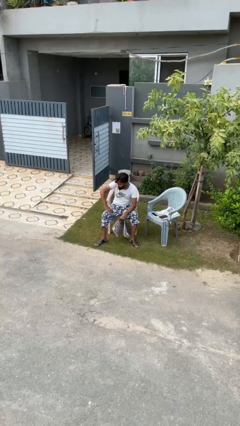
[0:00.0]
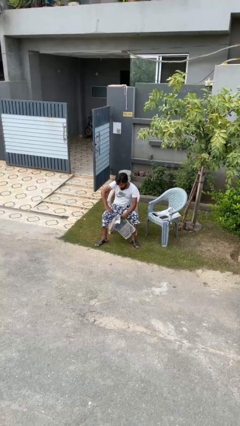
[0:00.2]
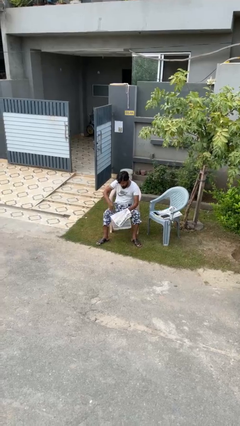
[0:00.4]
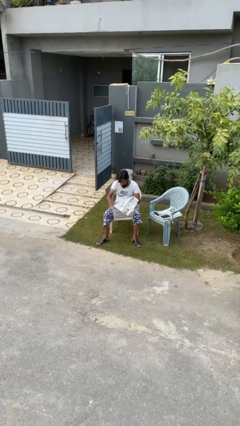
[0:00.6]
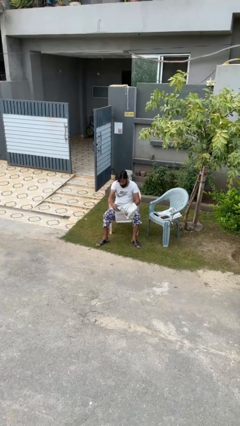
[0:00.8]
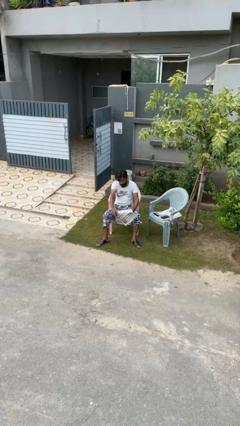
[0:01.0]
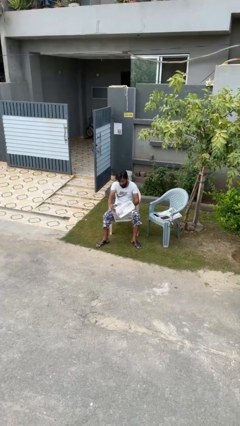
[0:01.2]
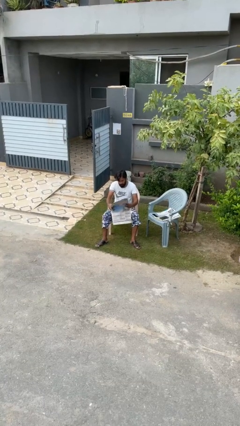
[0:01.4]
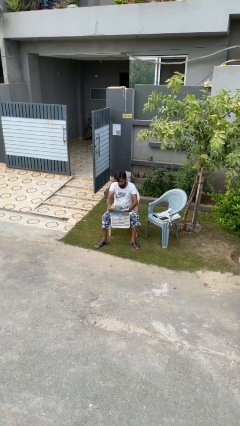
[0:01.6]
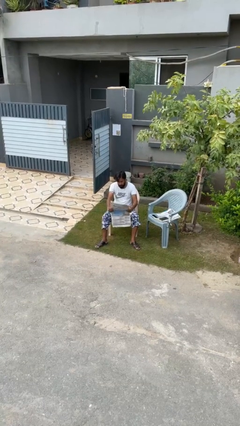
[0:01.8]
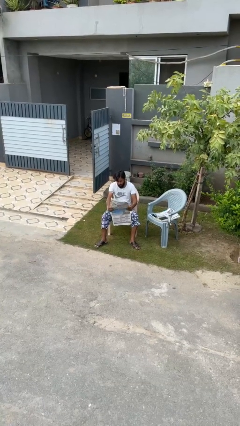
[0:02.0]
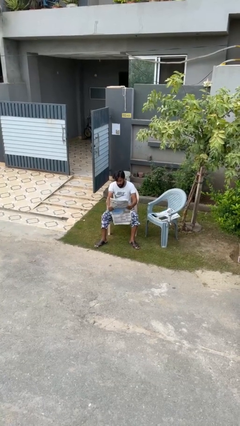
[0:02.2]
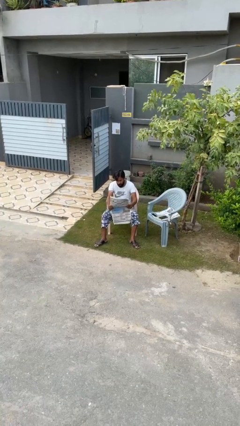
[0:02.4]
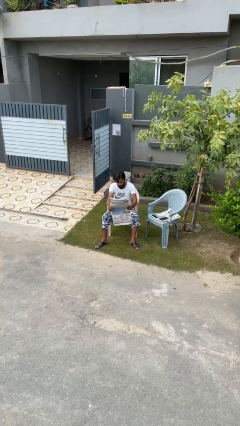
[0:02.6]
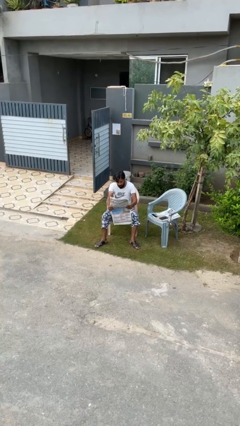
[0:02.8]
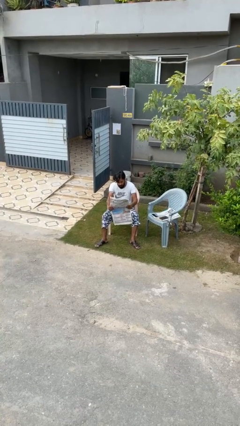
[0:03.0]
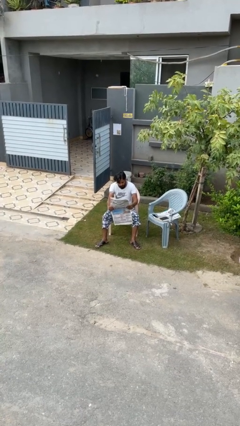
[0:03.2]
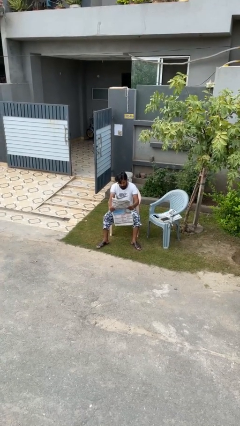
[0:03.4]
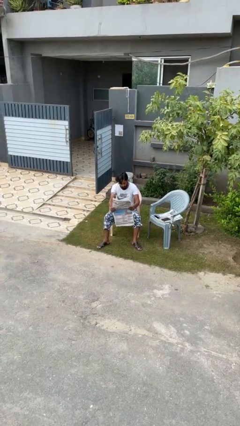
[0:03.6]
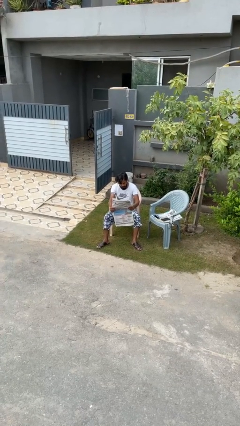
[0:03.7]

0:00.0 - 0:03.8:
person reads newspaper

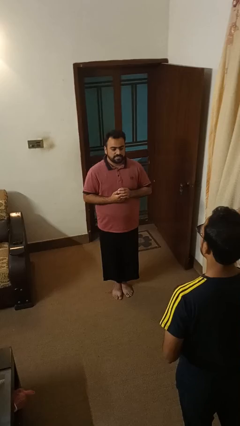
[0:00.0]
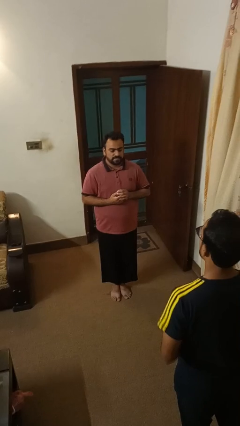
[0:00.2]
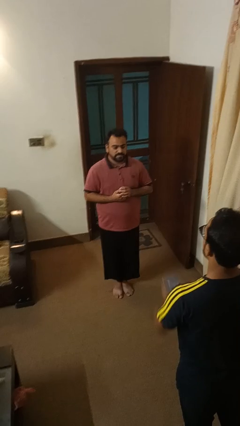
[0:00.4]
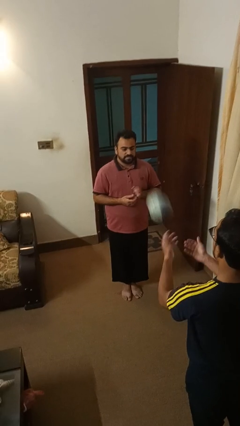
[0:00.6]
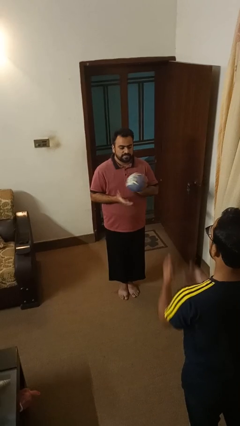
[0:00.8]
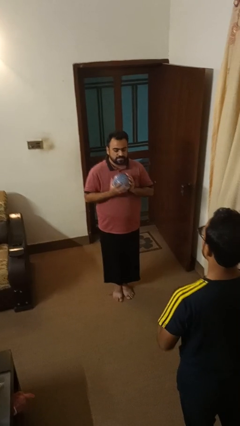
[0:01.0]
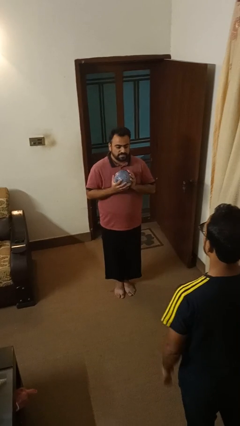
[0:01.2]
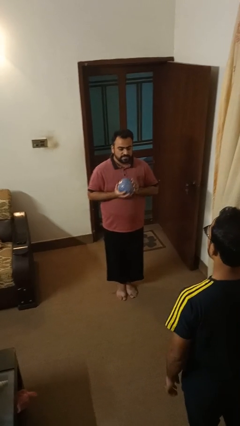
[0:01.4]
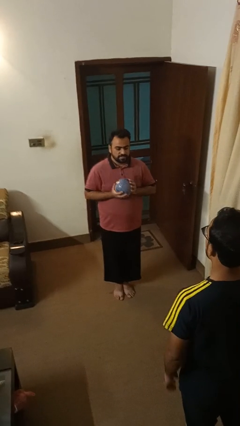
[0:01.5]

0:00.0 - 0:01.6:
person catches object from person

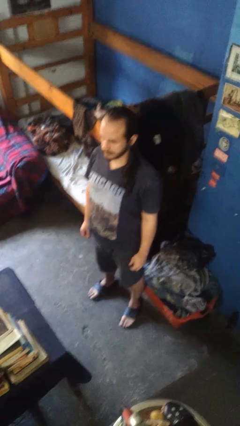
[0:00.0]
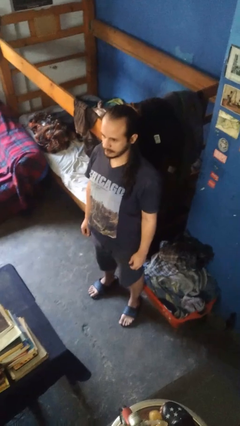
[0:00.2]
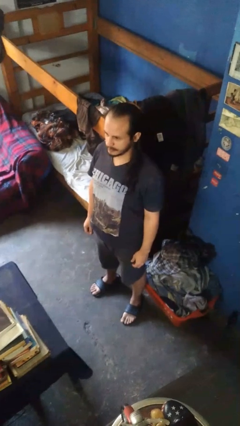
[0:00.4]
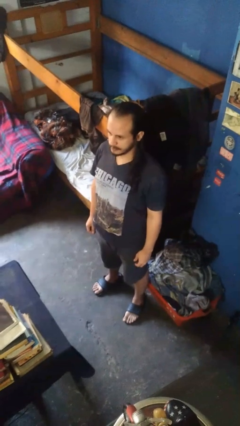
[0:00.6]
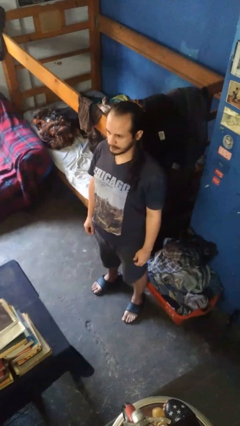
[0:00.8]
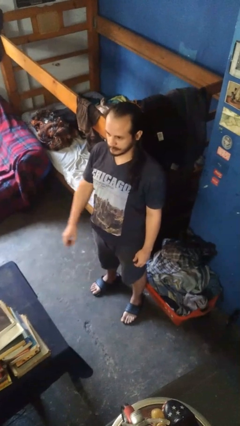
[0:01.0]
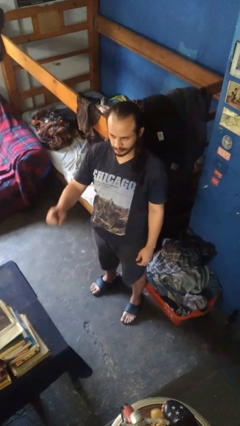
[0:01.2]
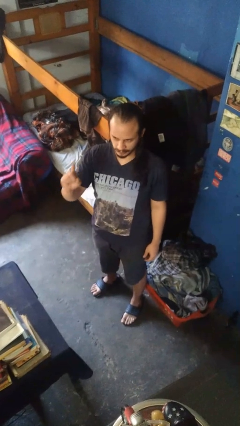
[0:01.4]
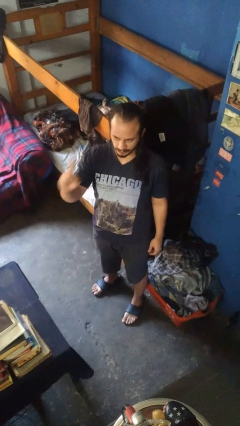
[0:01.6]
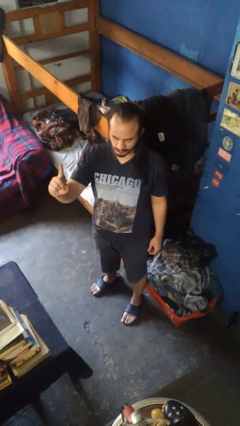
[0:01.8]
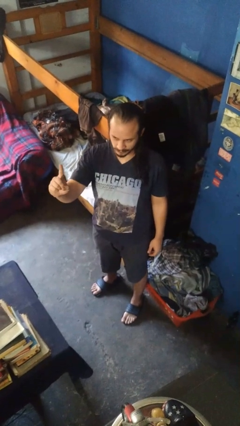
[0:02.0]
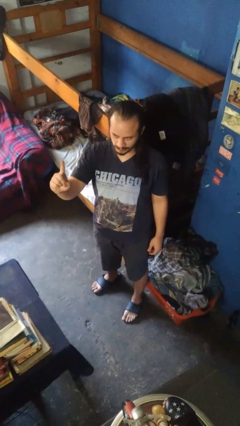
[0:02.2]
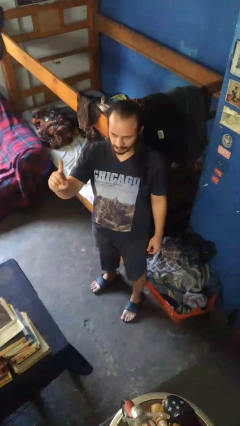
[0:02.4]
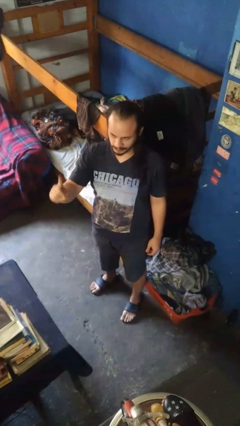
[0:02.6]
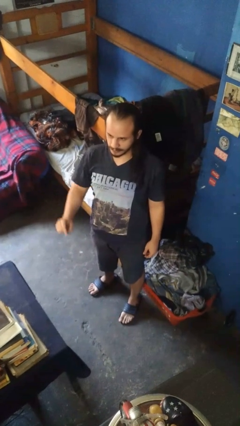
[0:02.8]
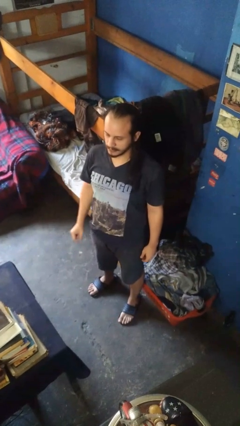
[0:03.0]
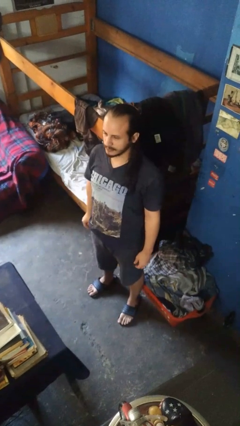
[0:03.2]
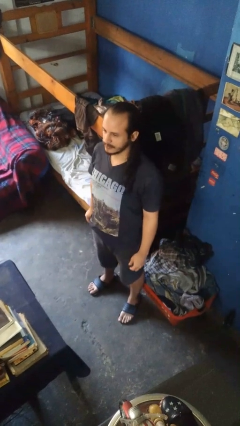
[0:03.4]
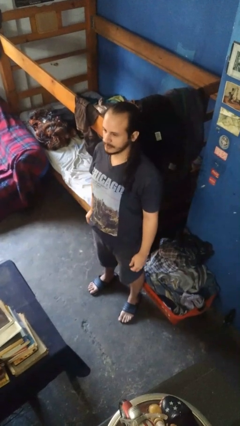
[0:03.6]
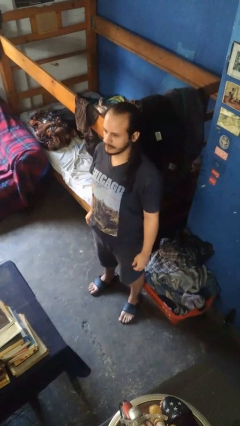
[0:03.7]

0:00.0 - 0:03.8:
person gestures number one

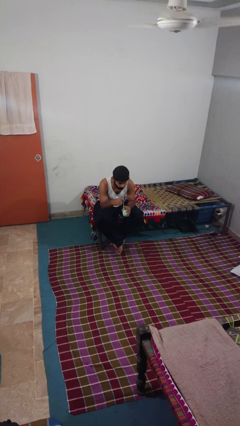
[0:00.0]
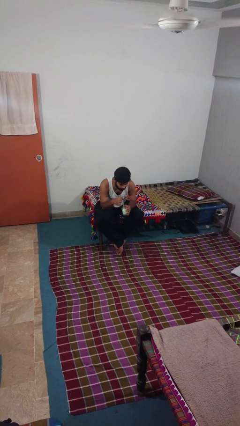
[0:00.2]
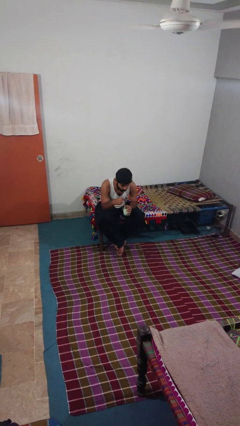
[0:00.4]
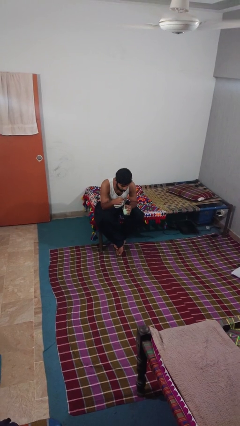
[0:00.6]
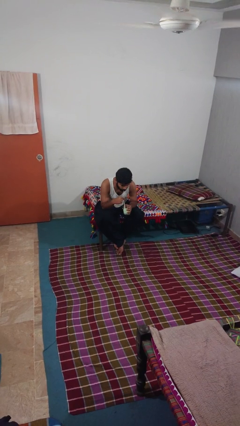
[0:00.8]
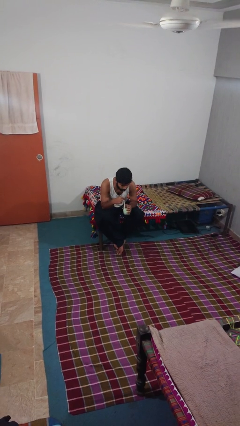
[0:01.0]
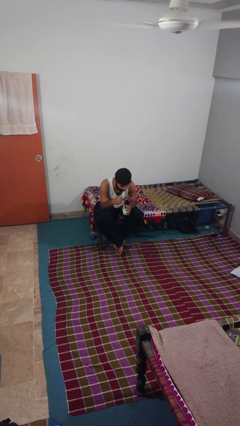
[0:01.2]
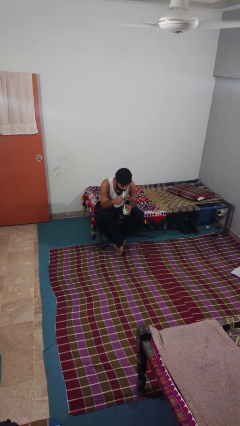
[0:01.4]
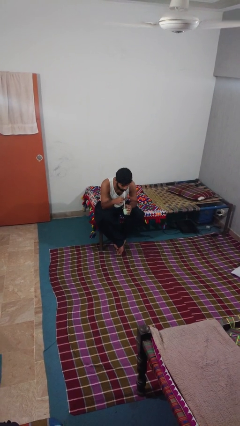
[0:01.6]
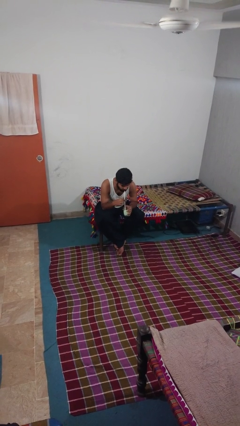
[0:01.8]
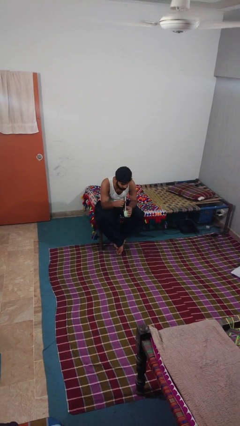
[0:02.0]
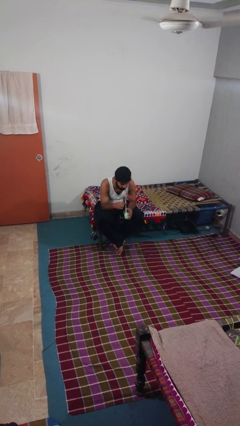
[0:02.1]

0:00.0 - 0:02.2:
person drinks from straw

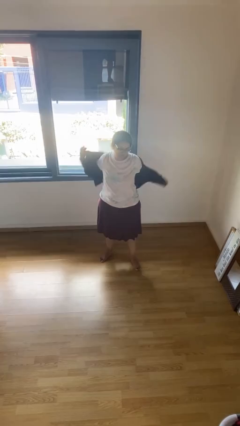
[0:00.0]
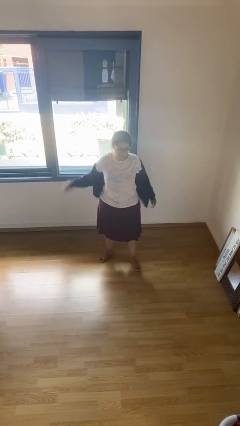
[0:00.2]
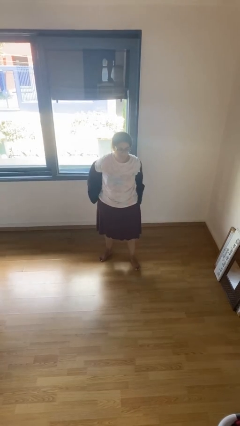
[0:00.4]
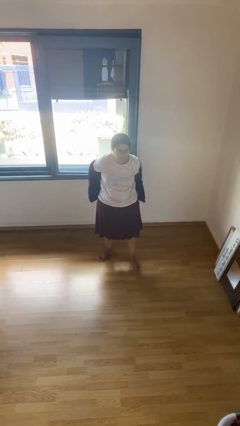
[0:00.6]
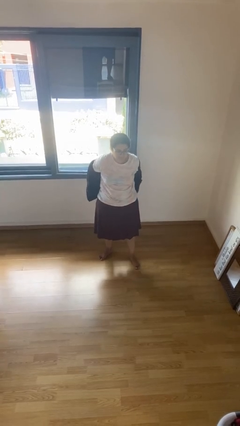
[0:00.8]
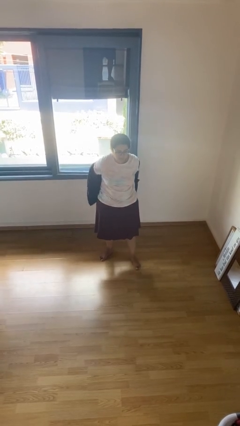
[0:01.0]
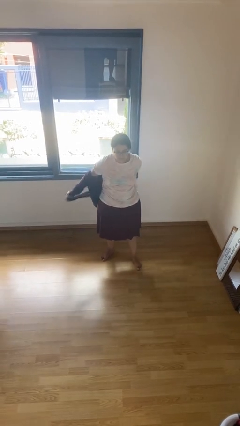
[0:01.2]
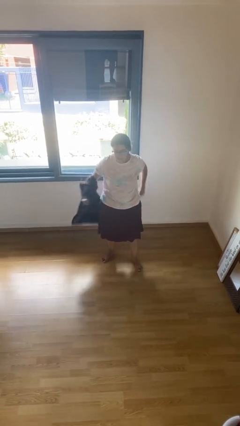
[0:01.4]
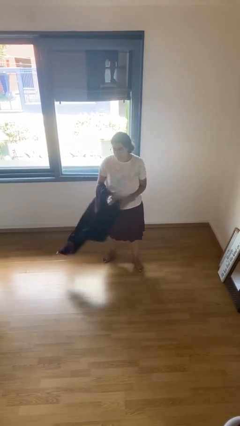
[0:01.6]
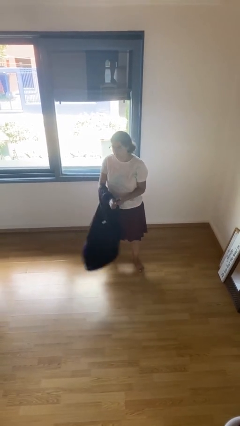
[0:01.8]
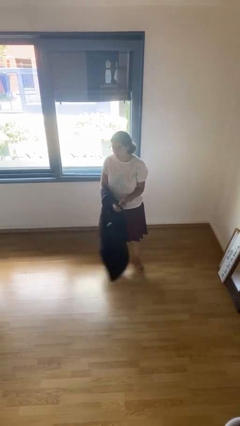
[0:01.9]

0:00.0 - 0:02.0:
person takes off jacket

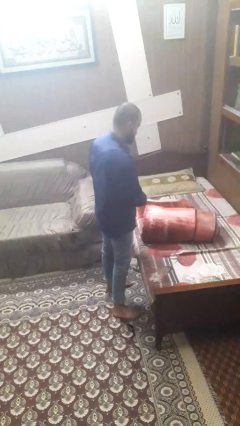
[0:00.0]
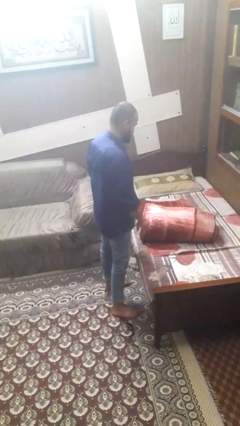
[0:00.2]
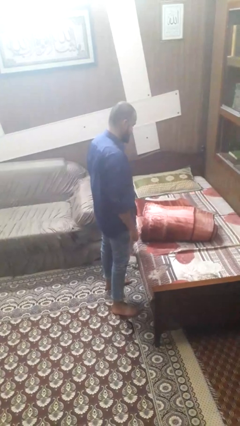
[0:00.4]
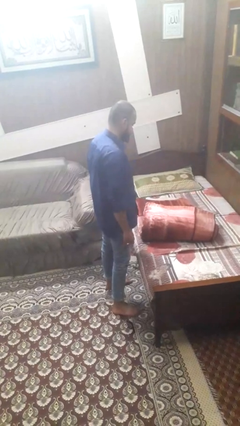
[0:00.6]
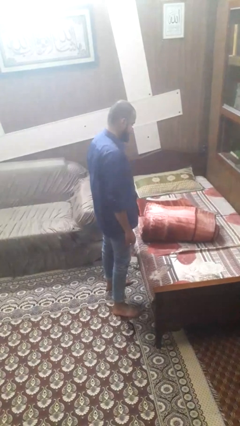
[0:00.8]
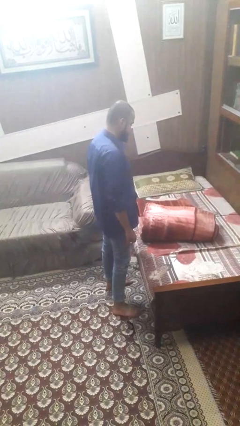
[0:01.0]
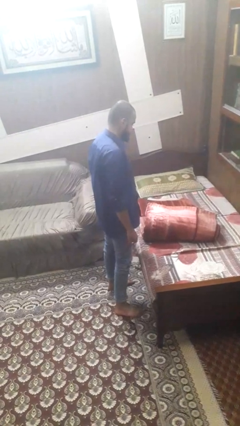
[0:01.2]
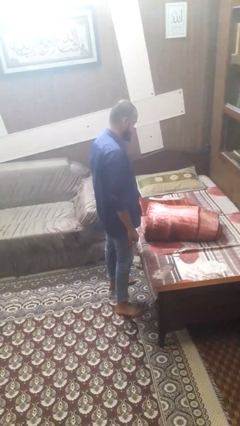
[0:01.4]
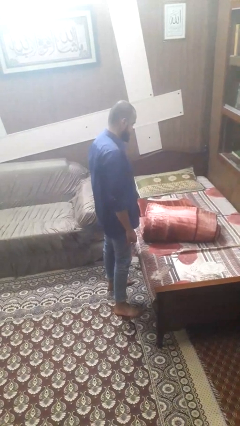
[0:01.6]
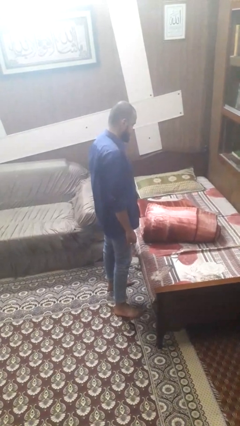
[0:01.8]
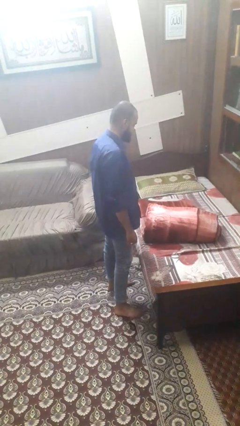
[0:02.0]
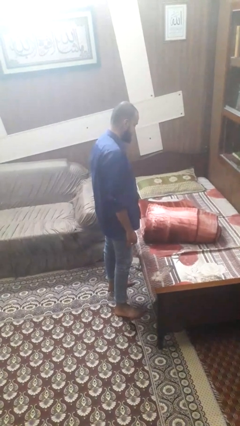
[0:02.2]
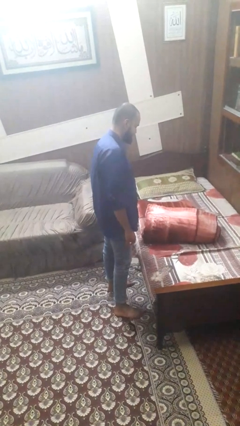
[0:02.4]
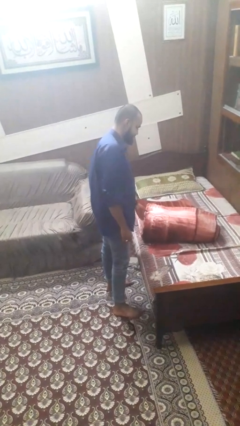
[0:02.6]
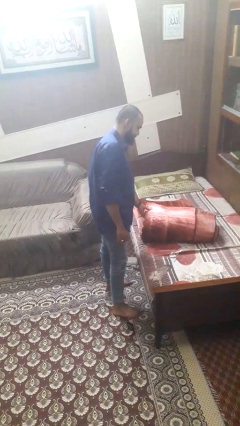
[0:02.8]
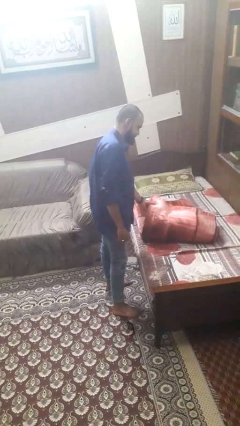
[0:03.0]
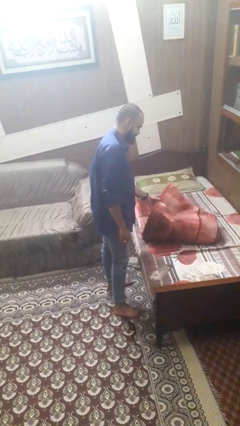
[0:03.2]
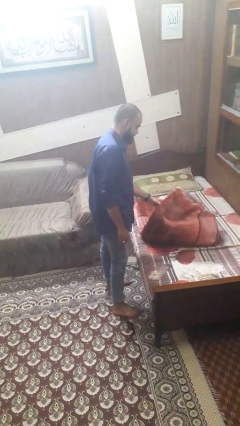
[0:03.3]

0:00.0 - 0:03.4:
person folds blanket

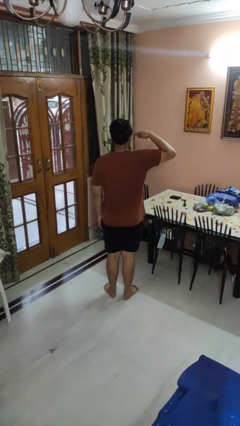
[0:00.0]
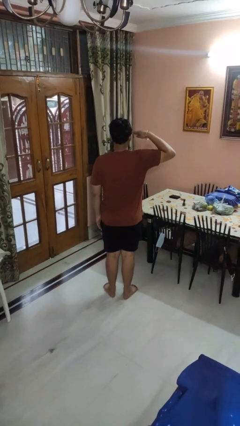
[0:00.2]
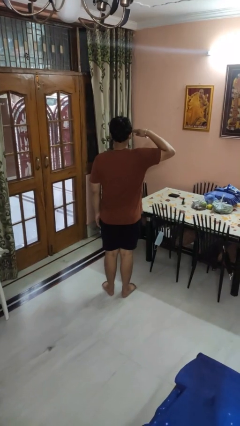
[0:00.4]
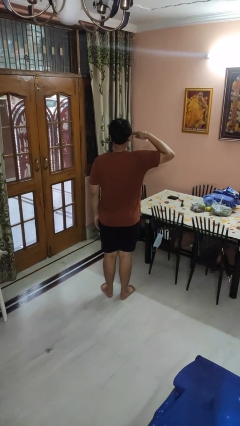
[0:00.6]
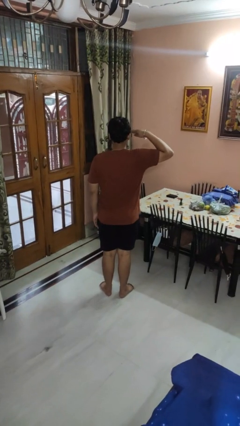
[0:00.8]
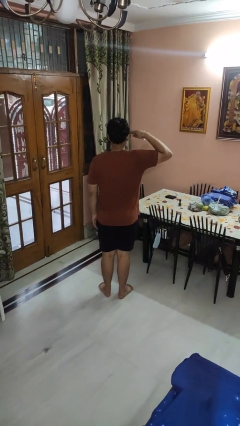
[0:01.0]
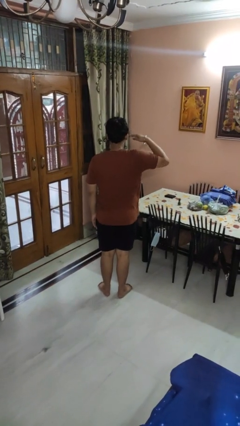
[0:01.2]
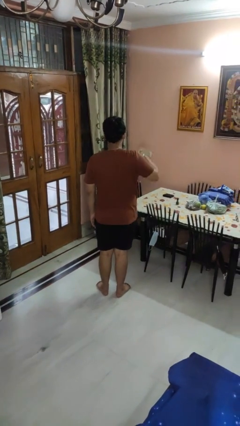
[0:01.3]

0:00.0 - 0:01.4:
person salutes
